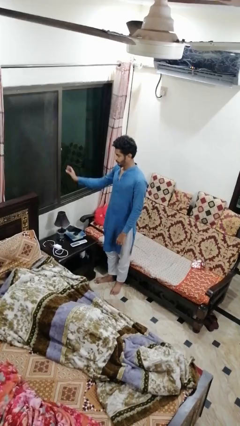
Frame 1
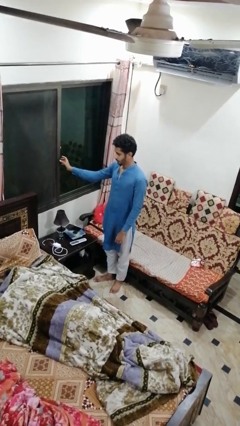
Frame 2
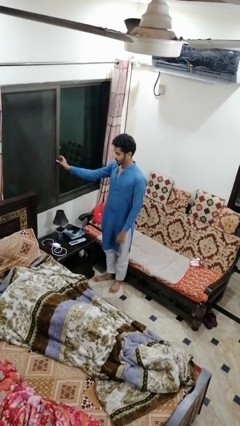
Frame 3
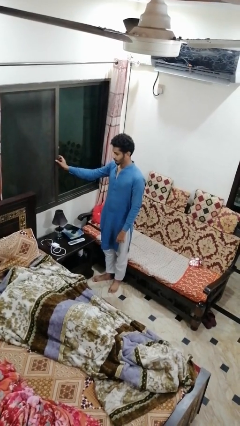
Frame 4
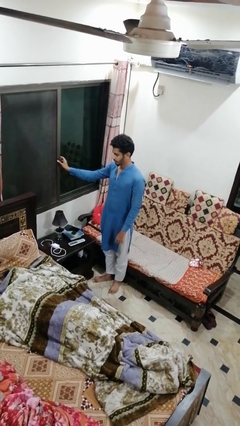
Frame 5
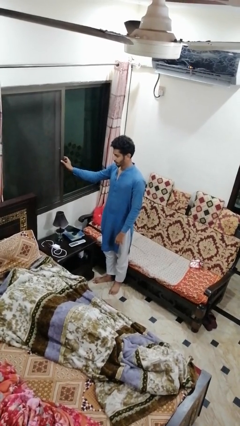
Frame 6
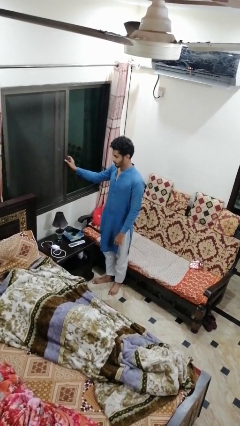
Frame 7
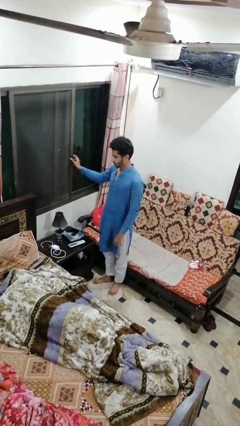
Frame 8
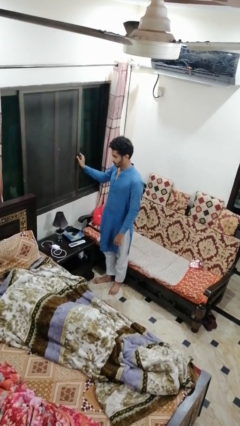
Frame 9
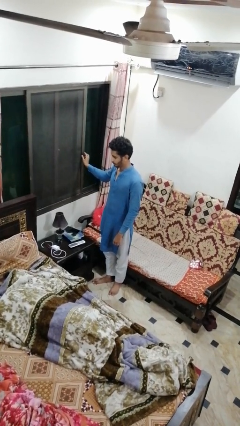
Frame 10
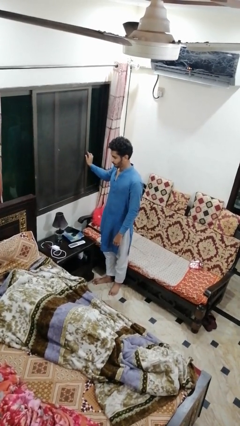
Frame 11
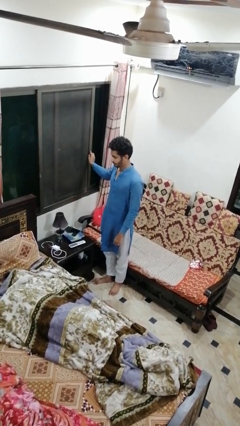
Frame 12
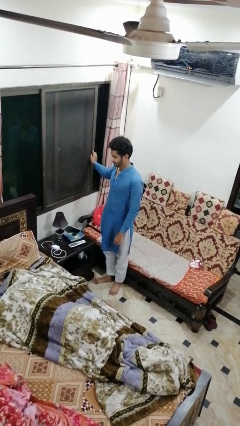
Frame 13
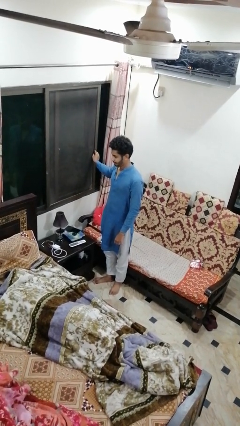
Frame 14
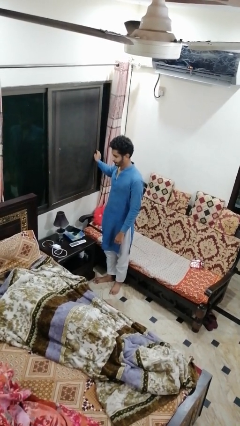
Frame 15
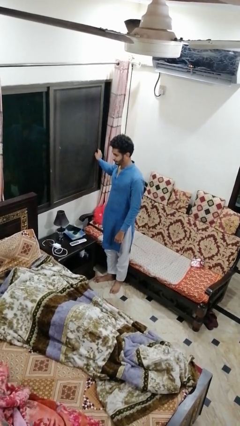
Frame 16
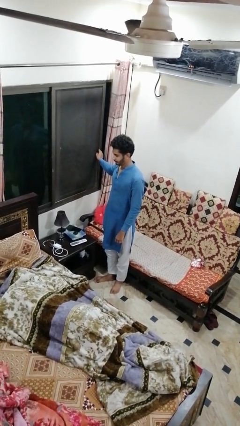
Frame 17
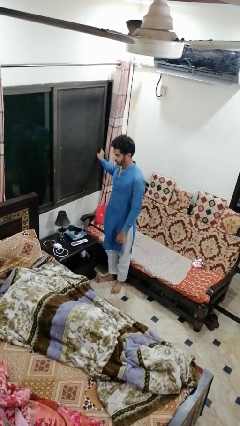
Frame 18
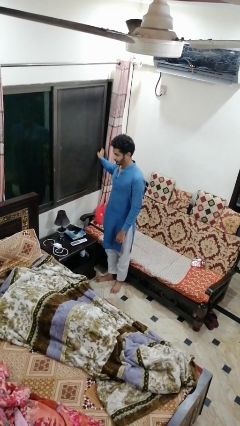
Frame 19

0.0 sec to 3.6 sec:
person opens home window

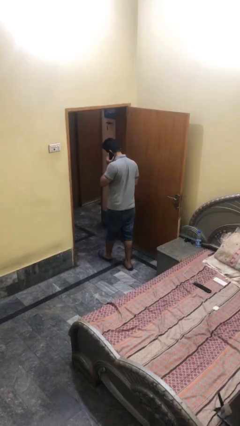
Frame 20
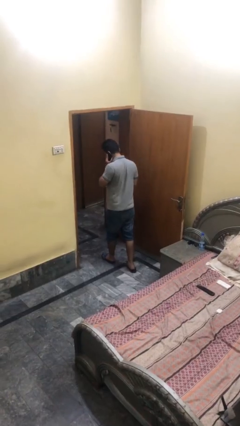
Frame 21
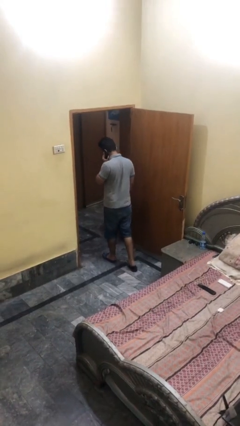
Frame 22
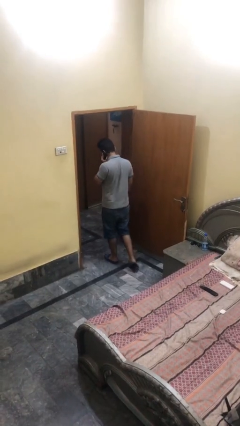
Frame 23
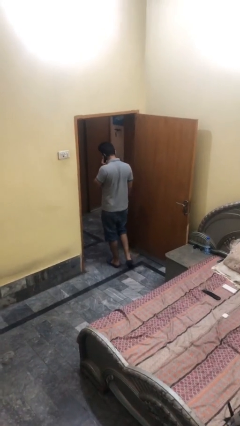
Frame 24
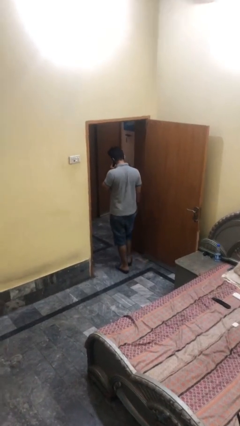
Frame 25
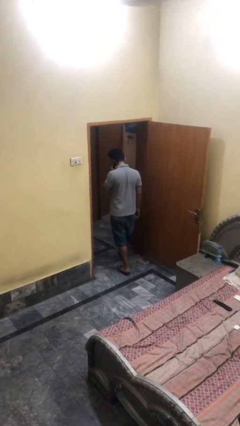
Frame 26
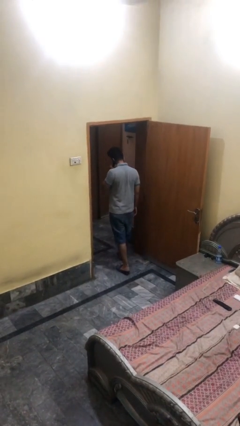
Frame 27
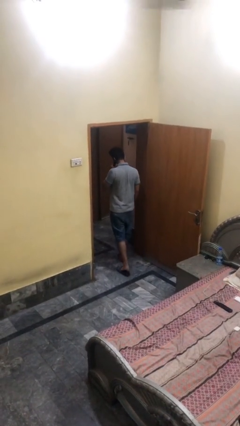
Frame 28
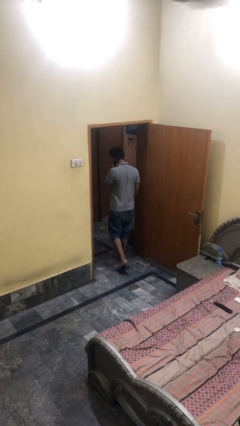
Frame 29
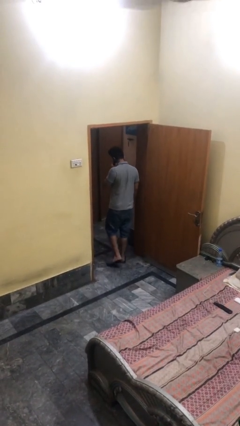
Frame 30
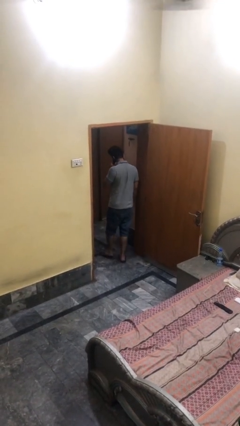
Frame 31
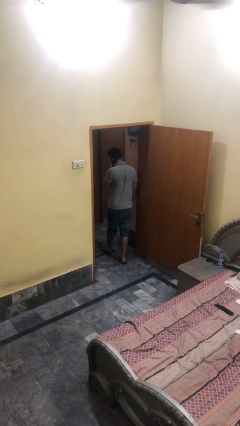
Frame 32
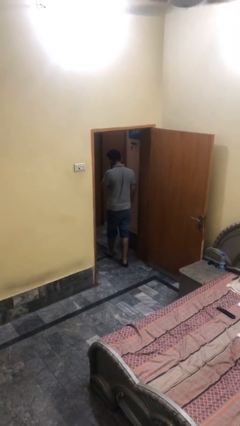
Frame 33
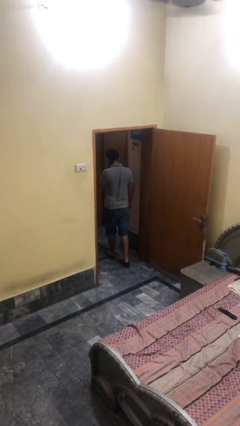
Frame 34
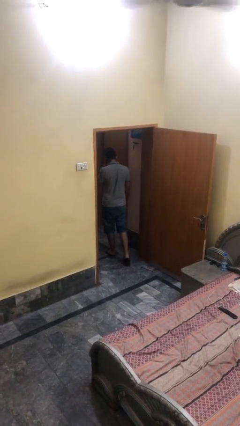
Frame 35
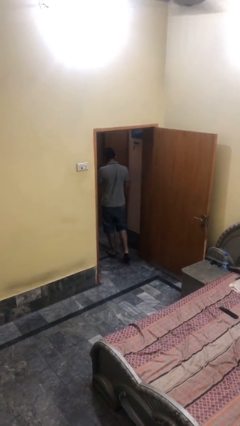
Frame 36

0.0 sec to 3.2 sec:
person exits scene through structure

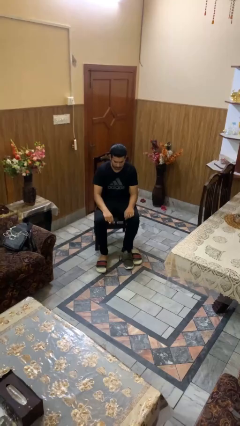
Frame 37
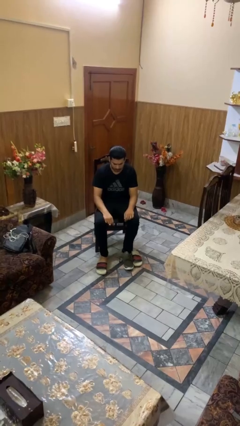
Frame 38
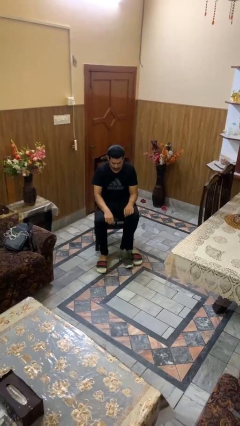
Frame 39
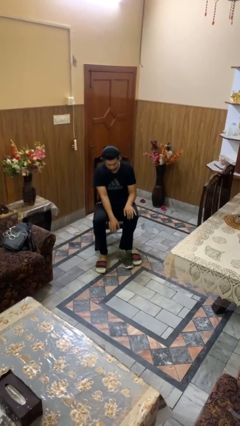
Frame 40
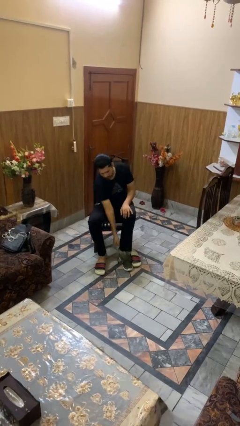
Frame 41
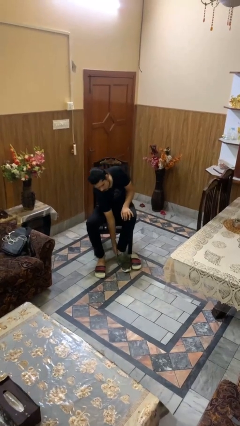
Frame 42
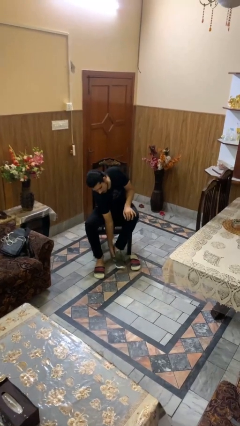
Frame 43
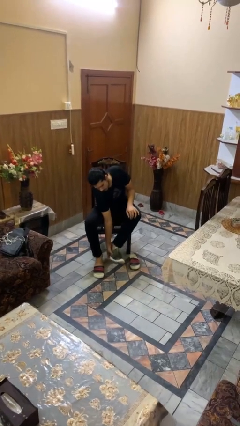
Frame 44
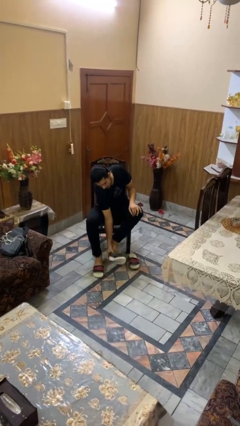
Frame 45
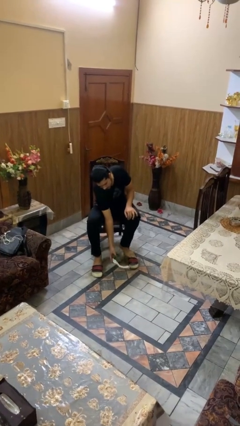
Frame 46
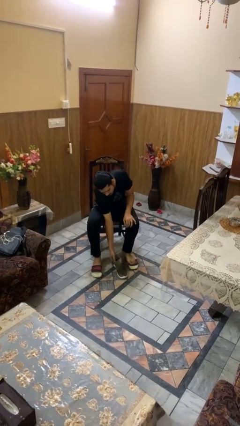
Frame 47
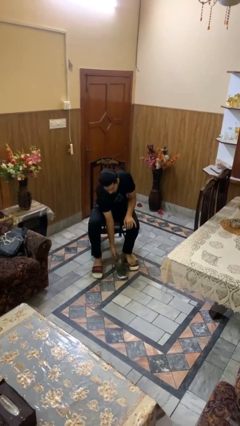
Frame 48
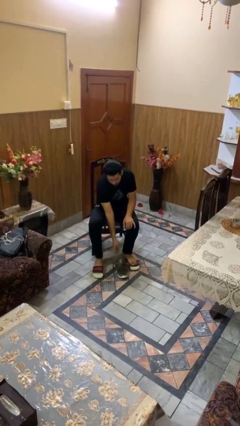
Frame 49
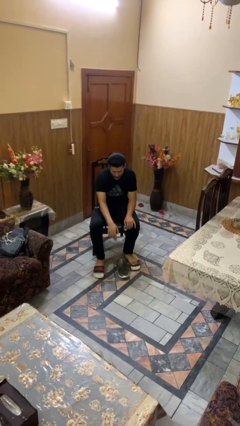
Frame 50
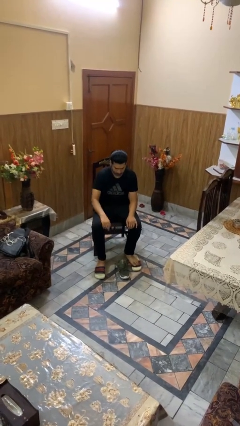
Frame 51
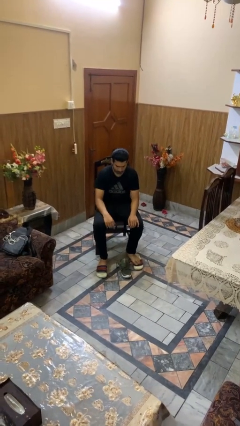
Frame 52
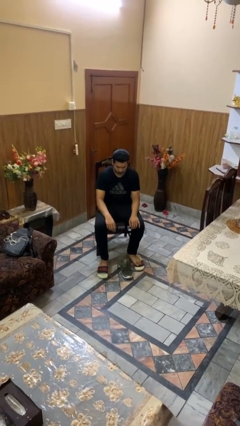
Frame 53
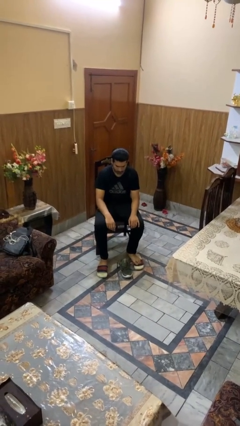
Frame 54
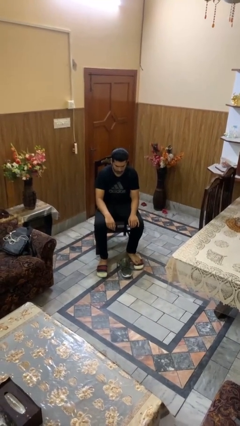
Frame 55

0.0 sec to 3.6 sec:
person takes off shoes

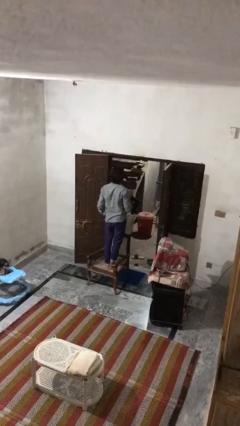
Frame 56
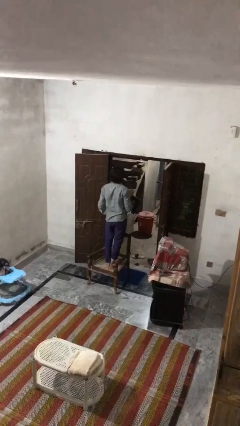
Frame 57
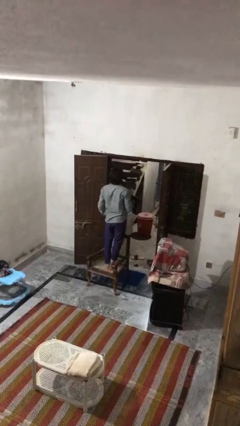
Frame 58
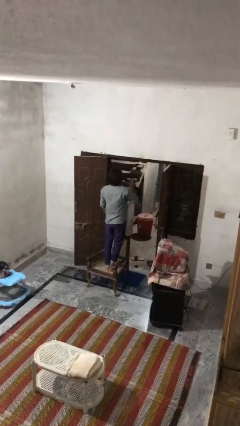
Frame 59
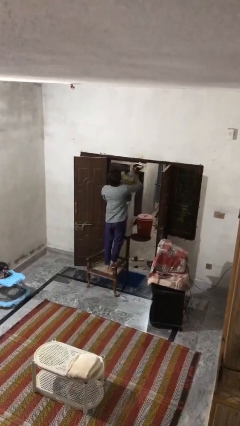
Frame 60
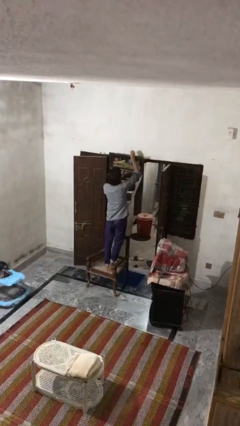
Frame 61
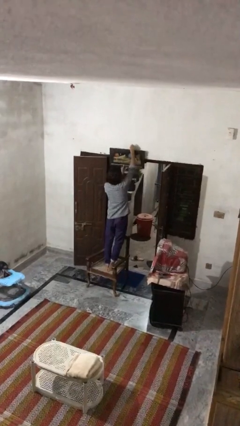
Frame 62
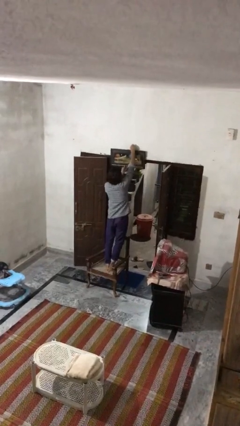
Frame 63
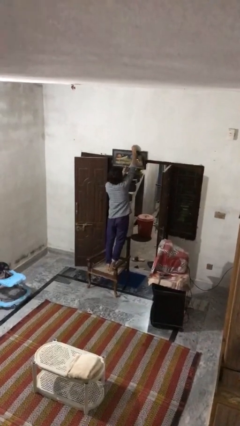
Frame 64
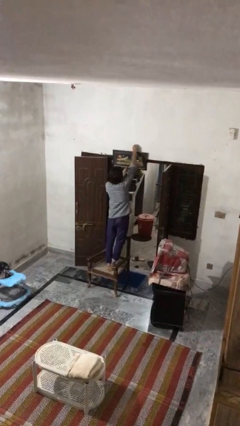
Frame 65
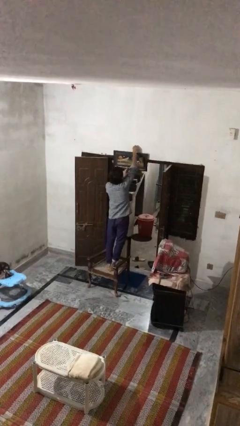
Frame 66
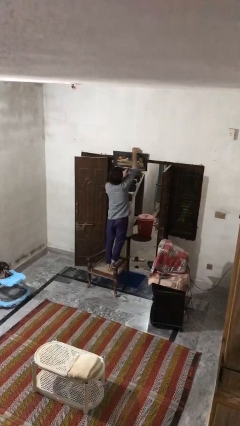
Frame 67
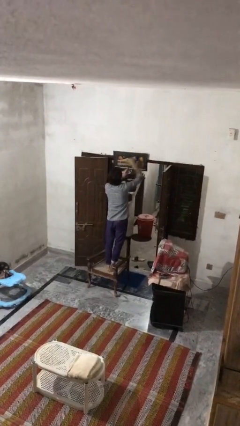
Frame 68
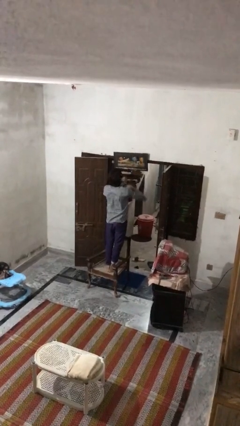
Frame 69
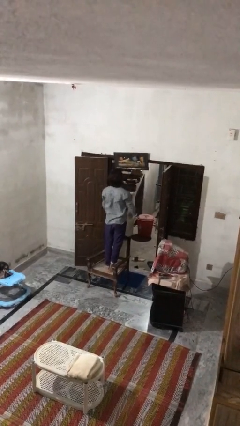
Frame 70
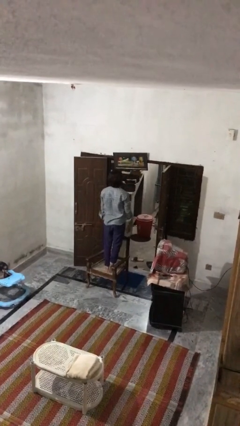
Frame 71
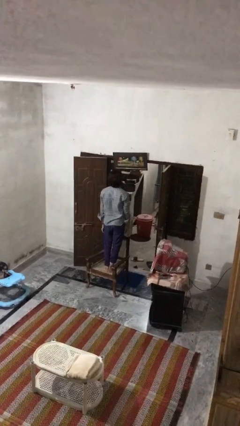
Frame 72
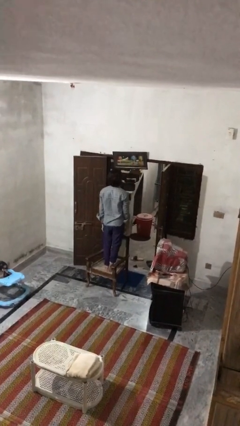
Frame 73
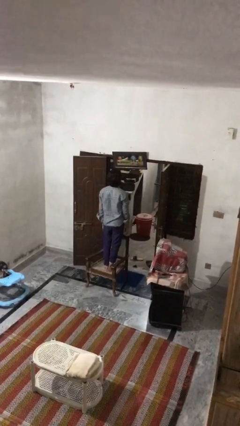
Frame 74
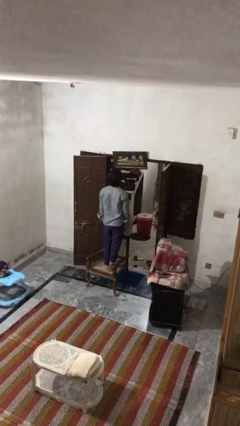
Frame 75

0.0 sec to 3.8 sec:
person puts up picture frame

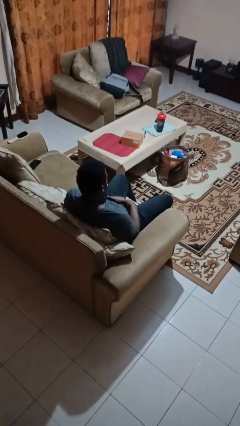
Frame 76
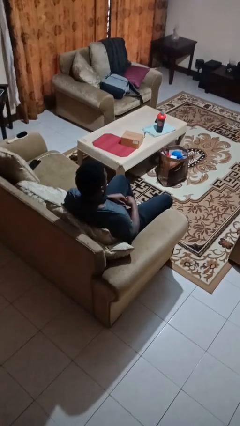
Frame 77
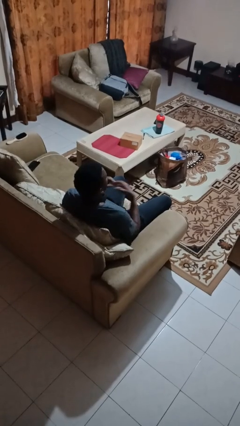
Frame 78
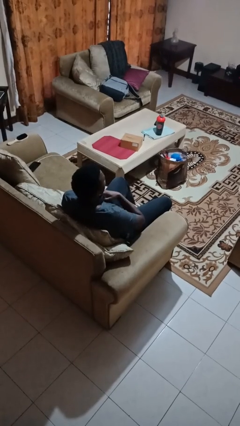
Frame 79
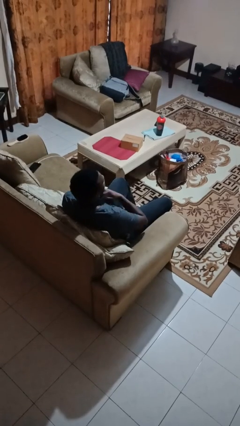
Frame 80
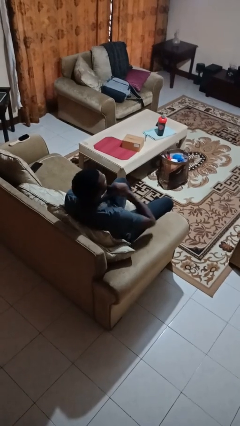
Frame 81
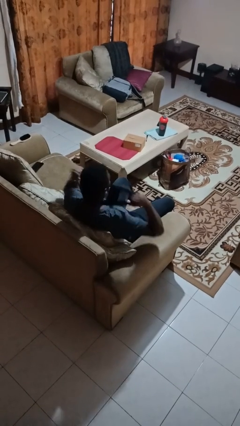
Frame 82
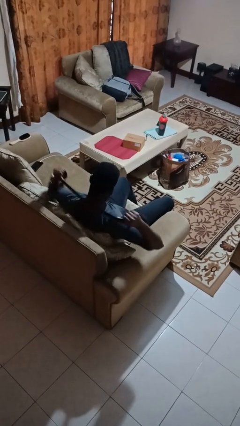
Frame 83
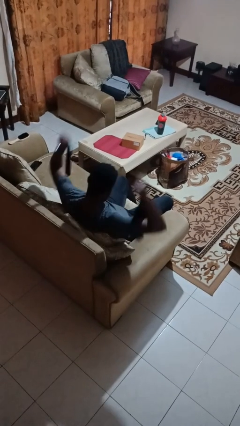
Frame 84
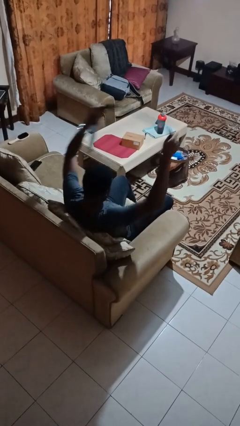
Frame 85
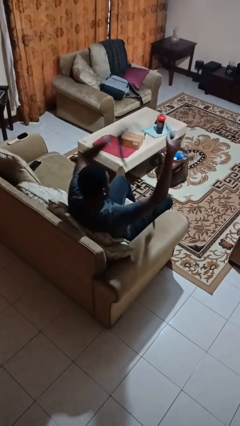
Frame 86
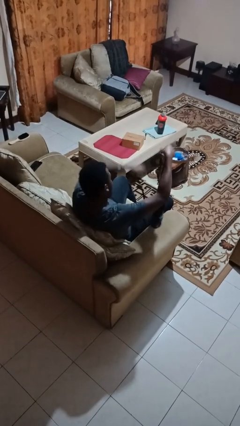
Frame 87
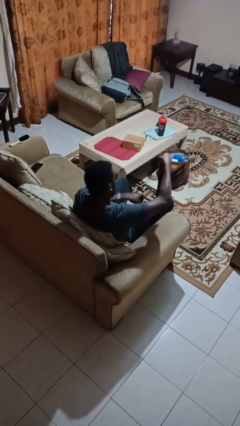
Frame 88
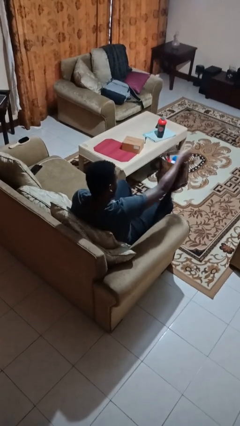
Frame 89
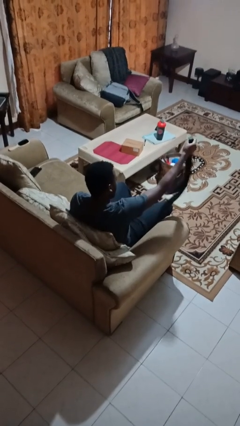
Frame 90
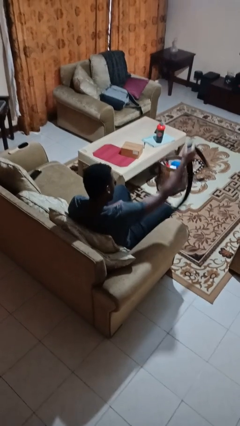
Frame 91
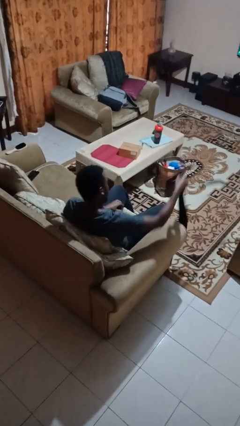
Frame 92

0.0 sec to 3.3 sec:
person takes off necktie
